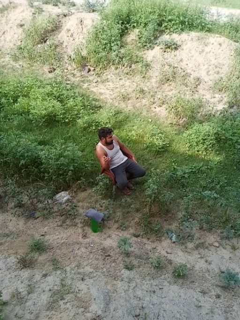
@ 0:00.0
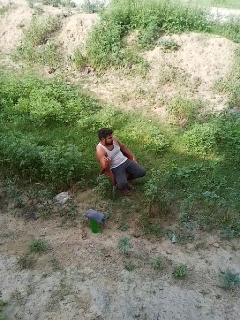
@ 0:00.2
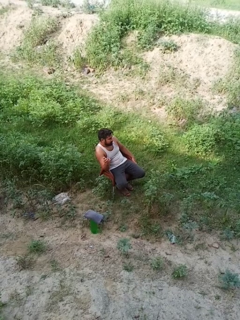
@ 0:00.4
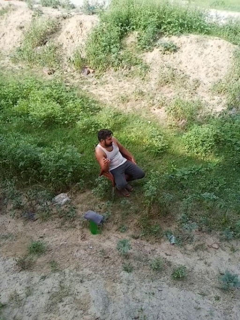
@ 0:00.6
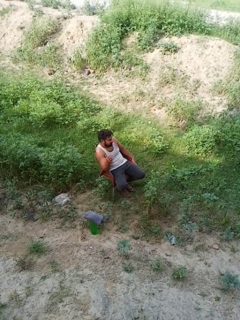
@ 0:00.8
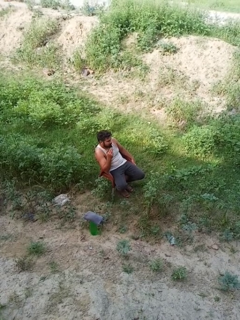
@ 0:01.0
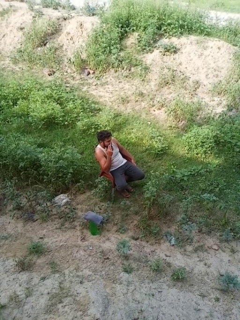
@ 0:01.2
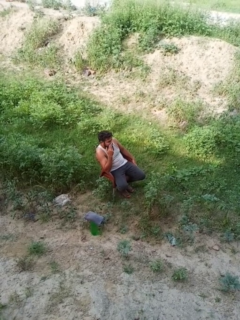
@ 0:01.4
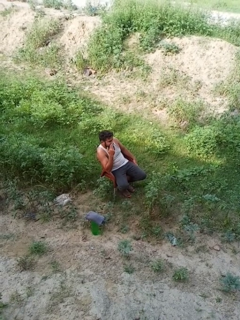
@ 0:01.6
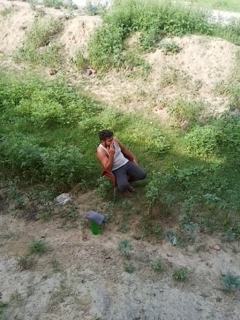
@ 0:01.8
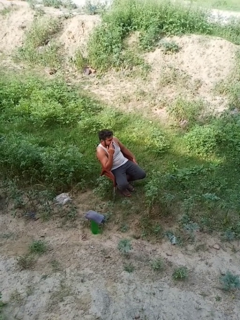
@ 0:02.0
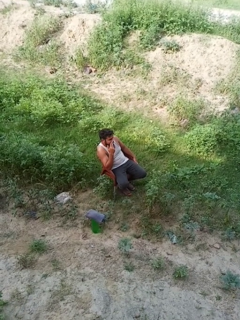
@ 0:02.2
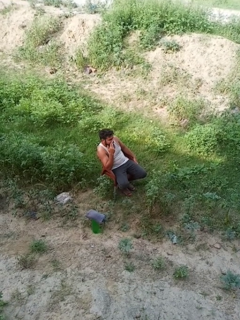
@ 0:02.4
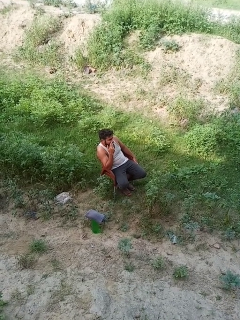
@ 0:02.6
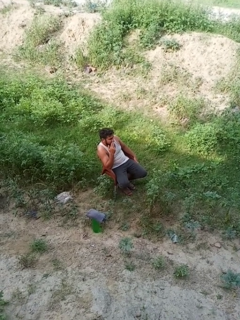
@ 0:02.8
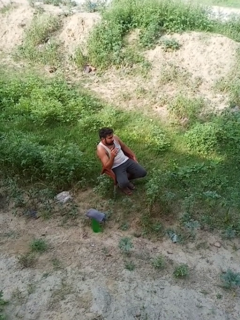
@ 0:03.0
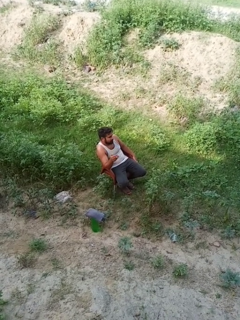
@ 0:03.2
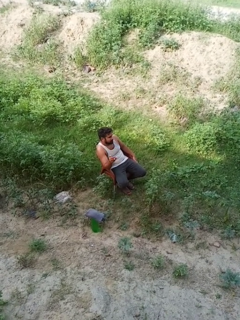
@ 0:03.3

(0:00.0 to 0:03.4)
person vapes

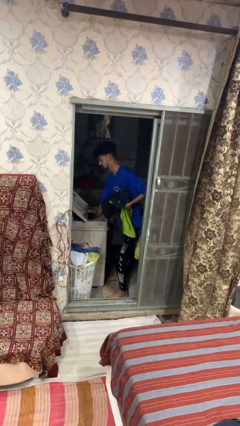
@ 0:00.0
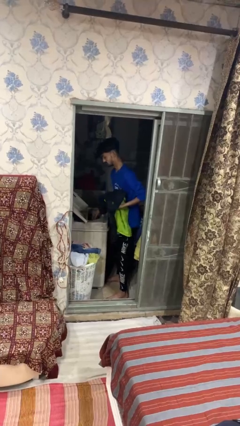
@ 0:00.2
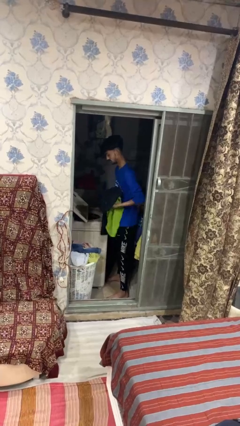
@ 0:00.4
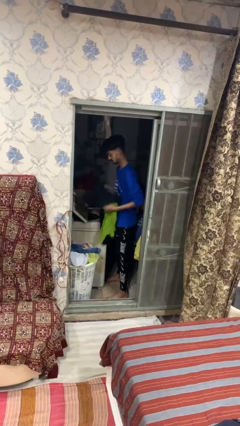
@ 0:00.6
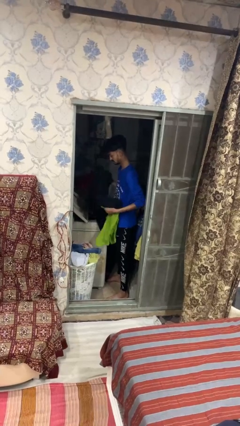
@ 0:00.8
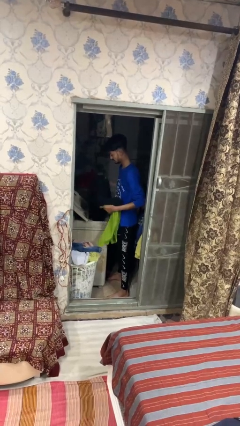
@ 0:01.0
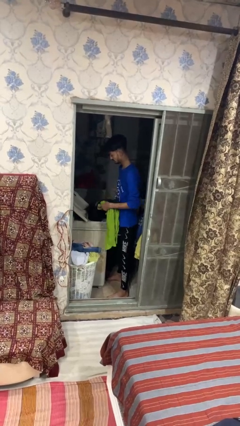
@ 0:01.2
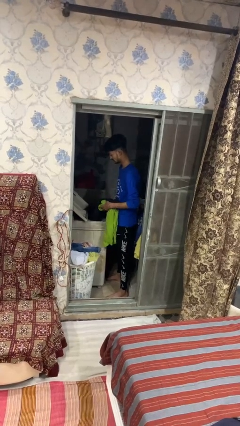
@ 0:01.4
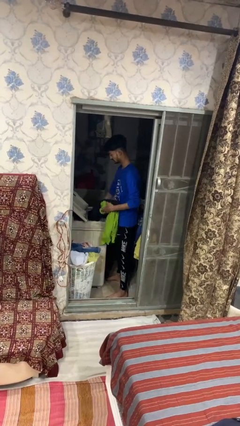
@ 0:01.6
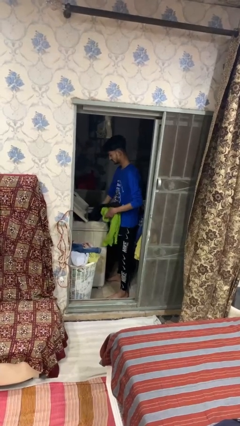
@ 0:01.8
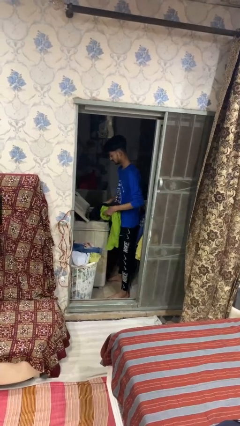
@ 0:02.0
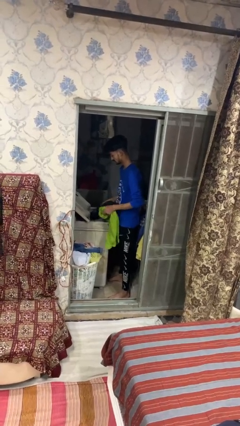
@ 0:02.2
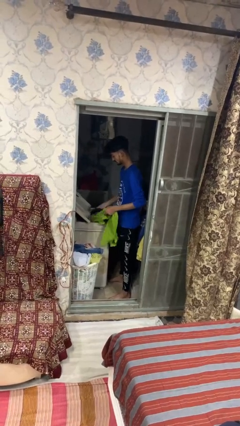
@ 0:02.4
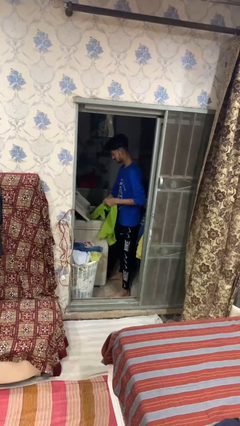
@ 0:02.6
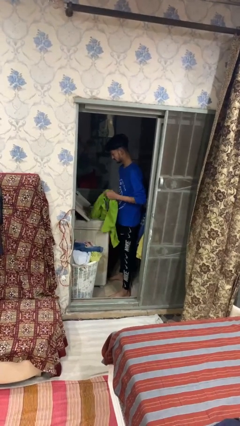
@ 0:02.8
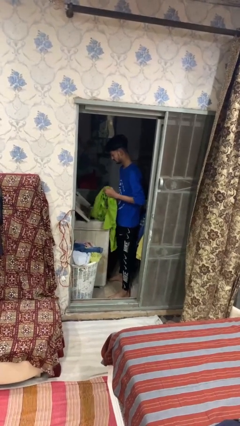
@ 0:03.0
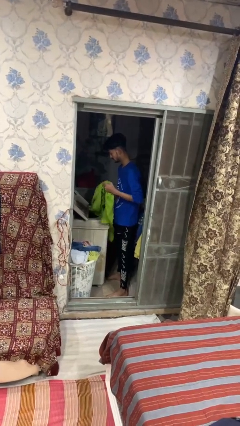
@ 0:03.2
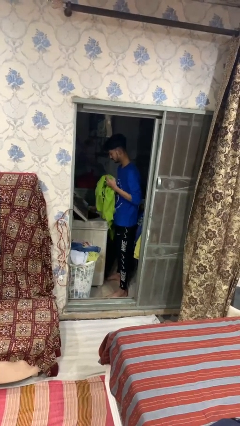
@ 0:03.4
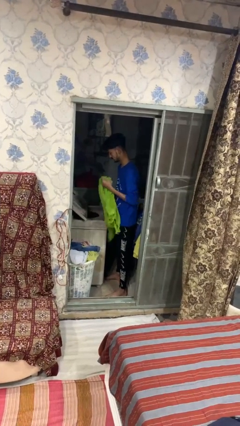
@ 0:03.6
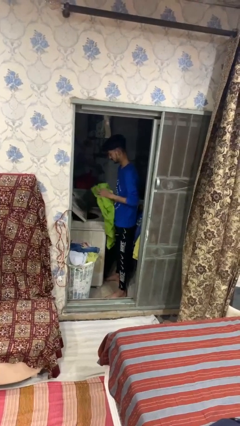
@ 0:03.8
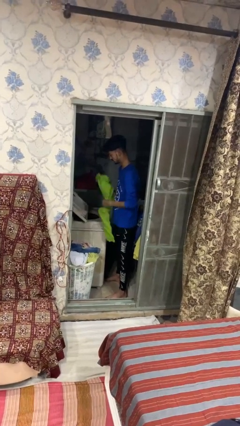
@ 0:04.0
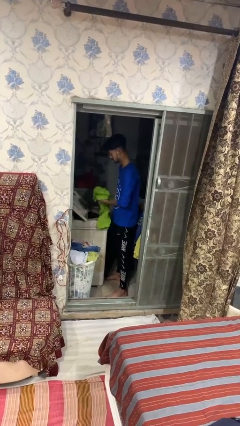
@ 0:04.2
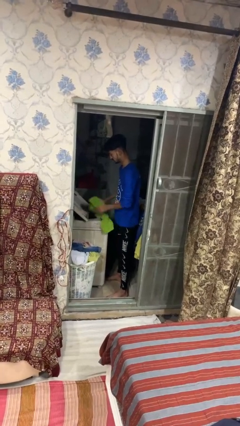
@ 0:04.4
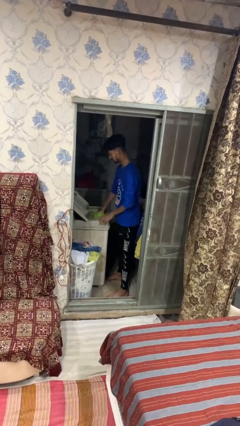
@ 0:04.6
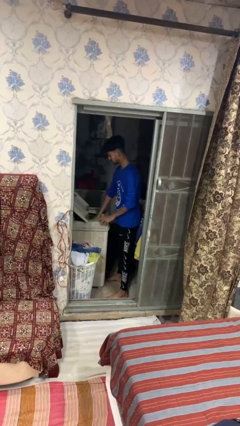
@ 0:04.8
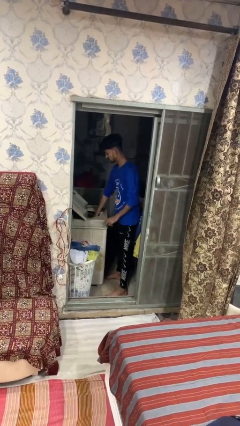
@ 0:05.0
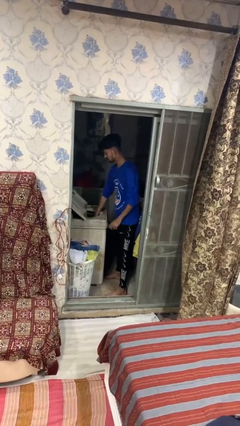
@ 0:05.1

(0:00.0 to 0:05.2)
person loads clotheswasher

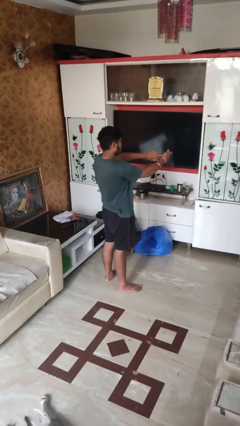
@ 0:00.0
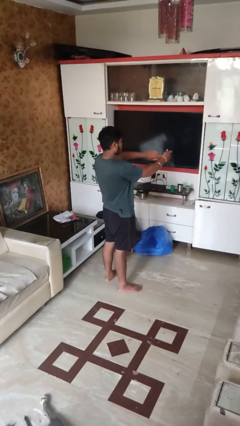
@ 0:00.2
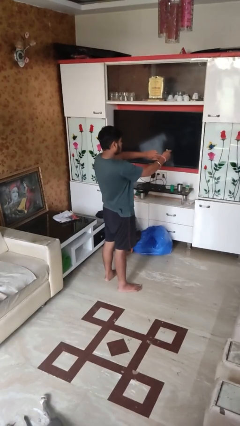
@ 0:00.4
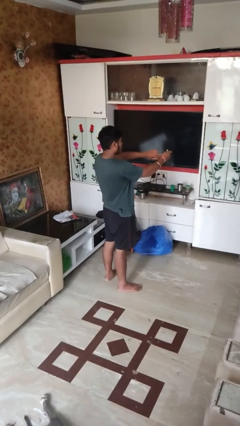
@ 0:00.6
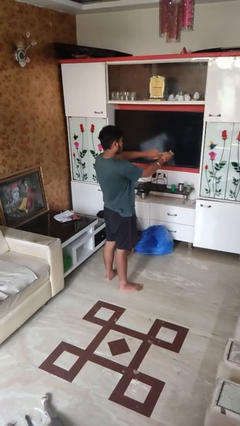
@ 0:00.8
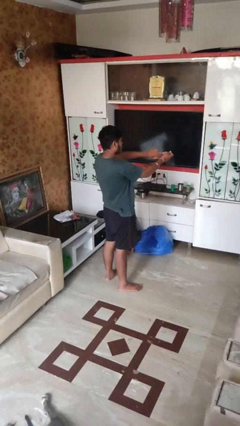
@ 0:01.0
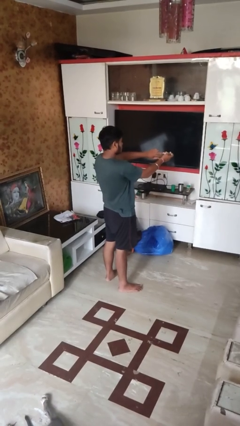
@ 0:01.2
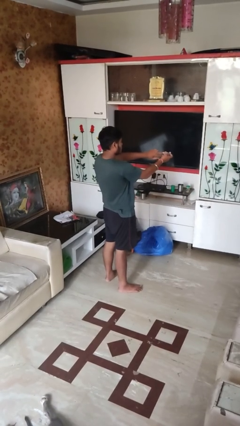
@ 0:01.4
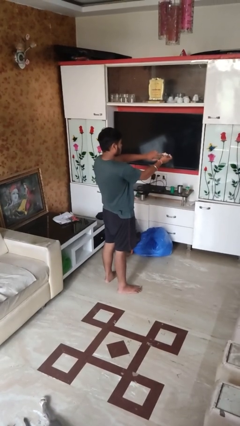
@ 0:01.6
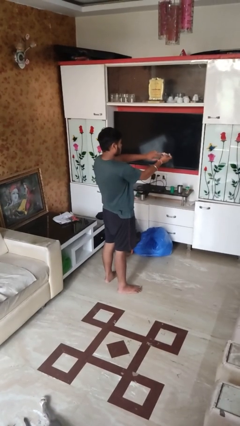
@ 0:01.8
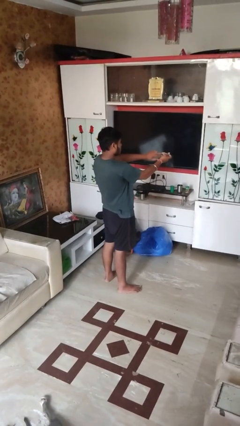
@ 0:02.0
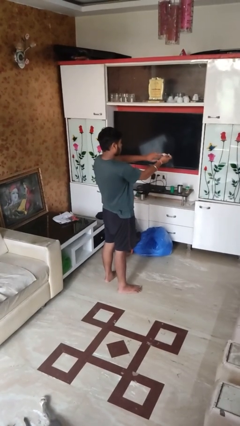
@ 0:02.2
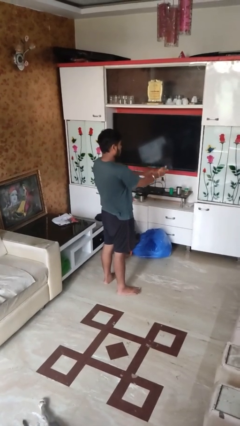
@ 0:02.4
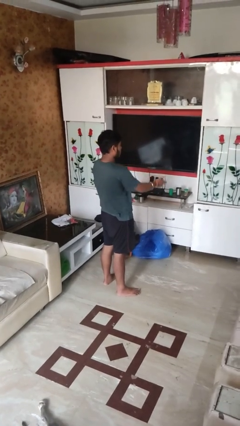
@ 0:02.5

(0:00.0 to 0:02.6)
person clips fingernails

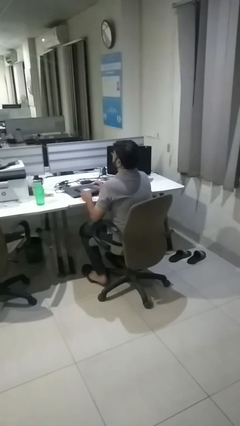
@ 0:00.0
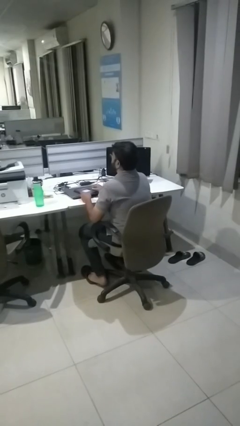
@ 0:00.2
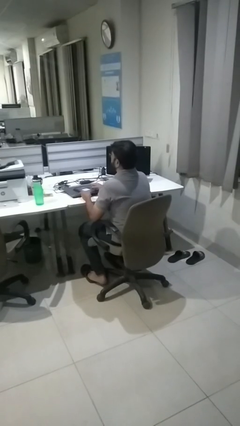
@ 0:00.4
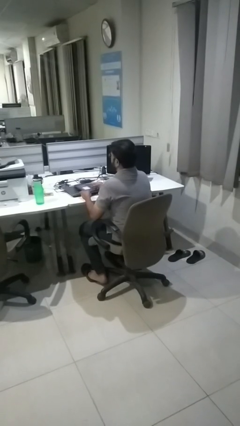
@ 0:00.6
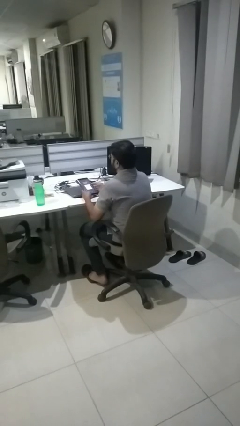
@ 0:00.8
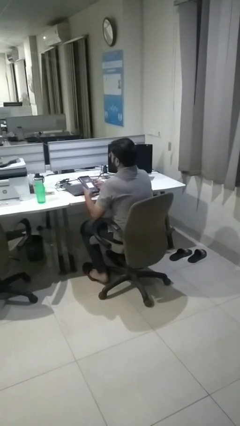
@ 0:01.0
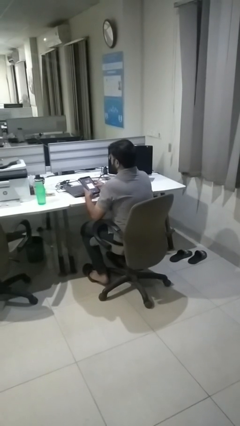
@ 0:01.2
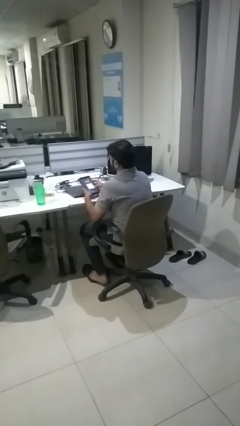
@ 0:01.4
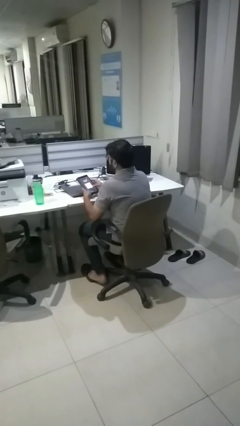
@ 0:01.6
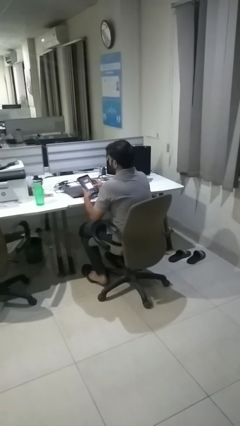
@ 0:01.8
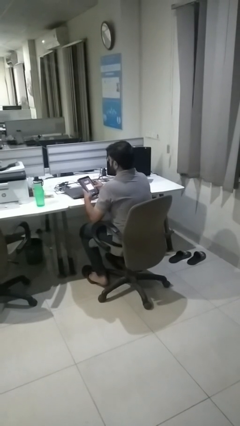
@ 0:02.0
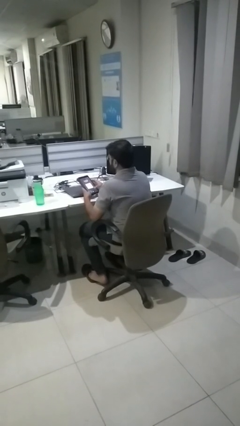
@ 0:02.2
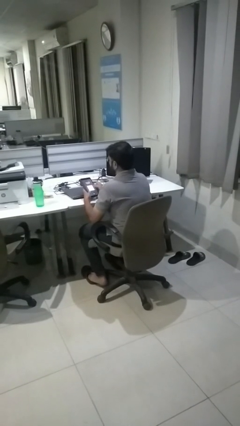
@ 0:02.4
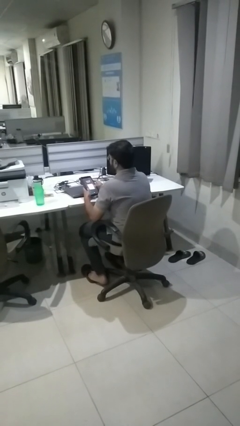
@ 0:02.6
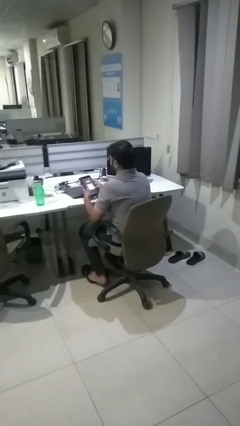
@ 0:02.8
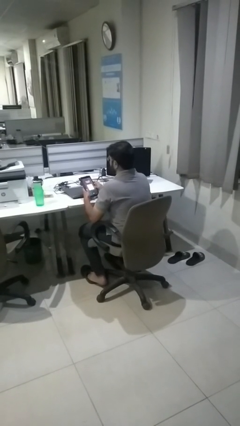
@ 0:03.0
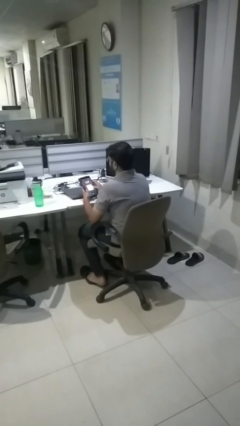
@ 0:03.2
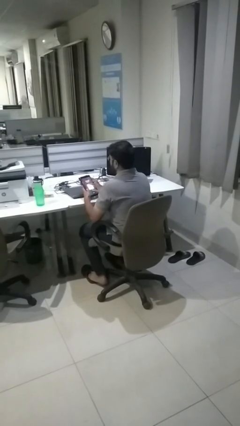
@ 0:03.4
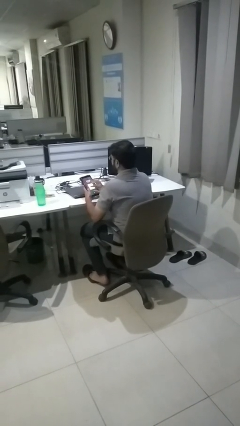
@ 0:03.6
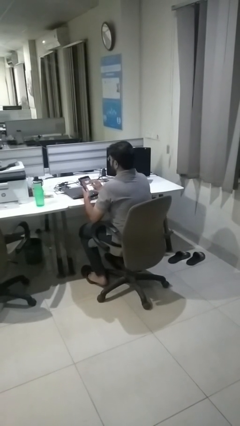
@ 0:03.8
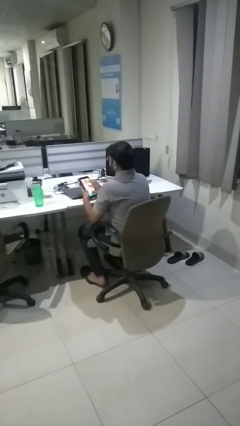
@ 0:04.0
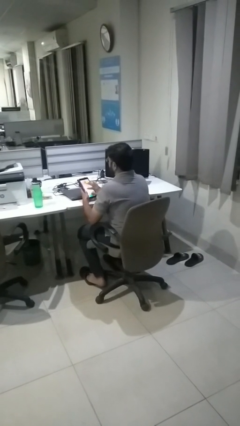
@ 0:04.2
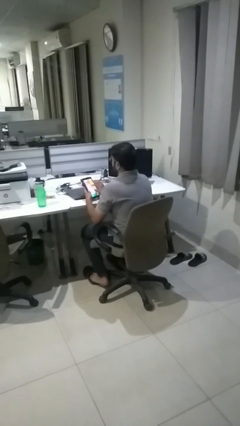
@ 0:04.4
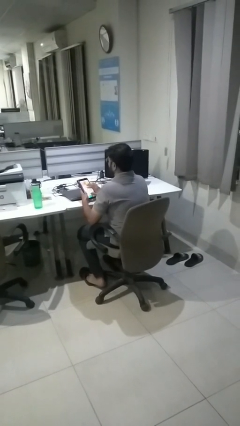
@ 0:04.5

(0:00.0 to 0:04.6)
person interacts with tablet

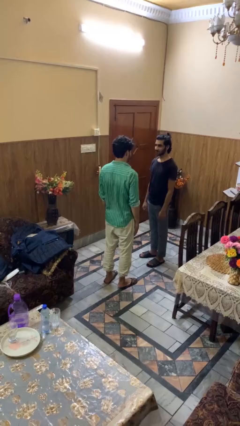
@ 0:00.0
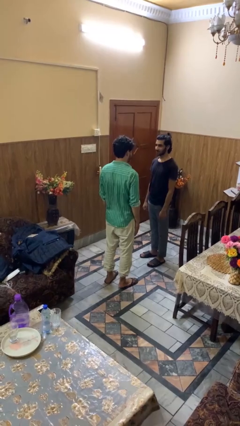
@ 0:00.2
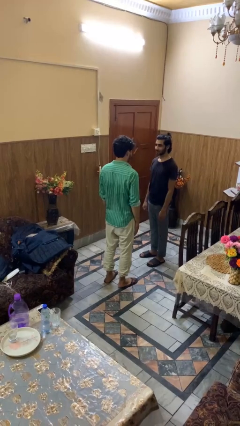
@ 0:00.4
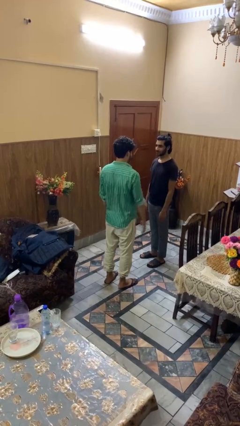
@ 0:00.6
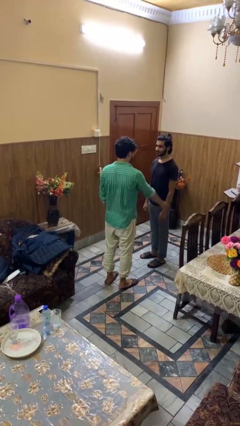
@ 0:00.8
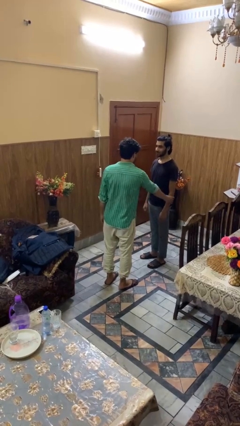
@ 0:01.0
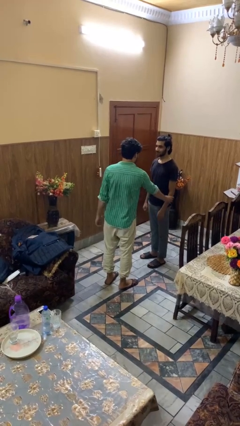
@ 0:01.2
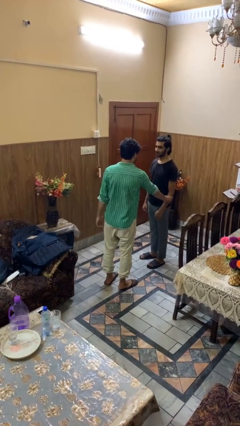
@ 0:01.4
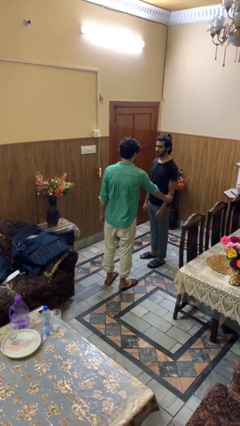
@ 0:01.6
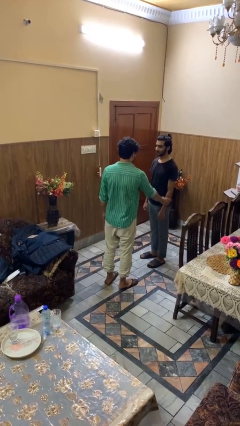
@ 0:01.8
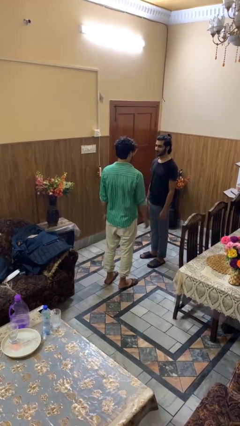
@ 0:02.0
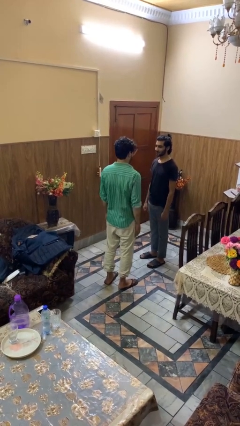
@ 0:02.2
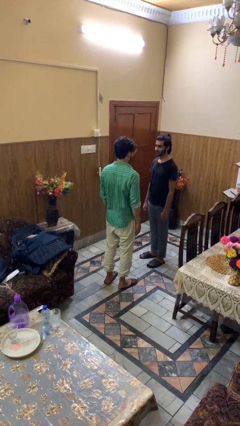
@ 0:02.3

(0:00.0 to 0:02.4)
person grabs person by forearm
